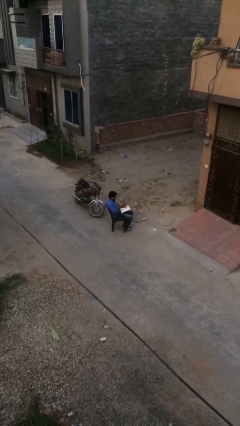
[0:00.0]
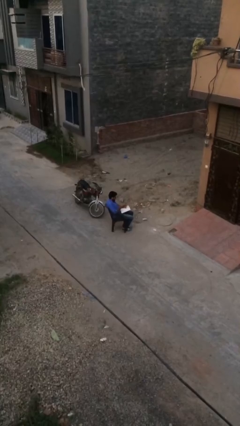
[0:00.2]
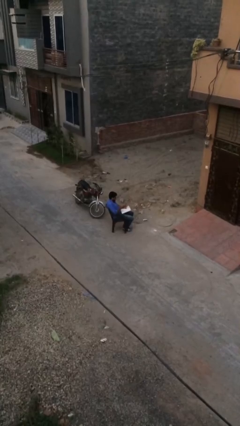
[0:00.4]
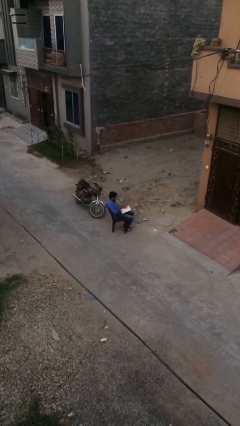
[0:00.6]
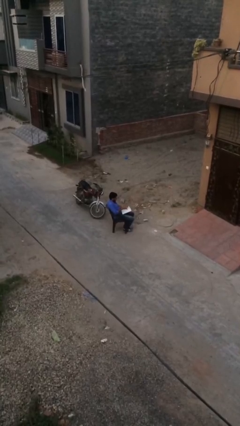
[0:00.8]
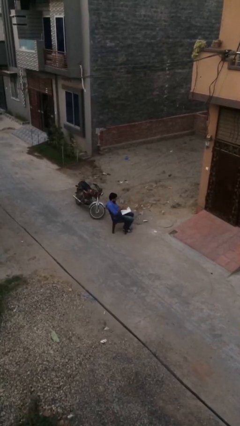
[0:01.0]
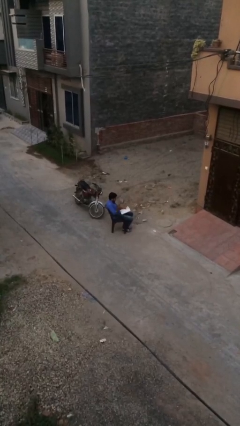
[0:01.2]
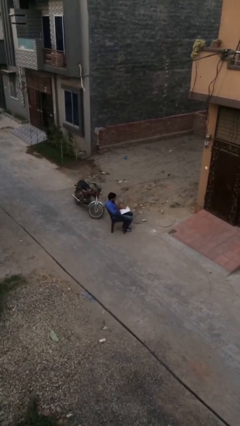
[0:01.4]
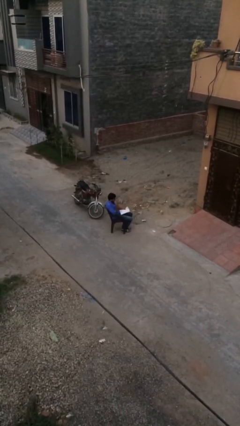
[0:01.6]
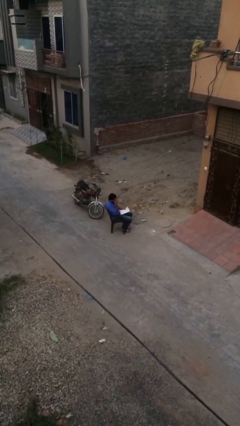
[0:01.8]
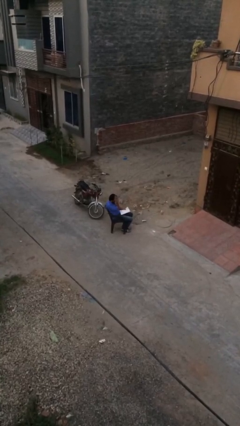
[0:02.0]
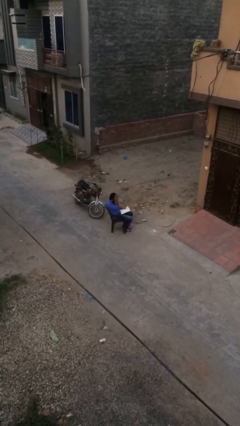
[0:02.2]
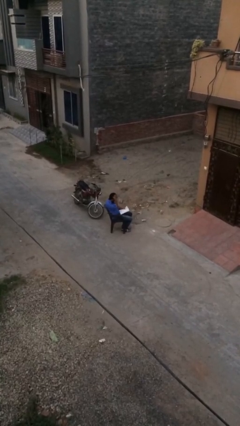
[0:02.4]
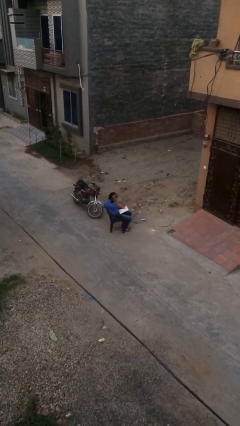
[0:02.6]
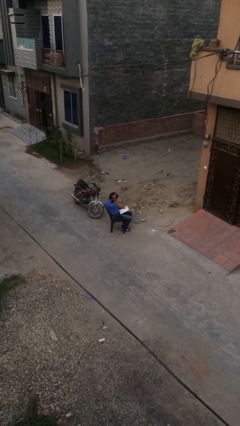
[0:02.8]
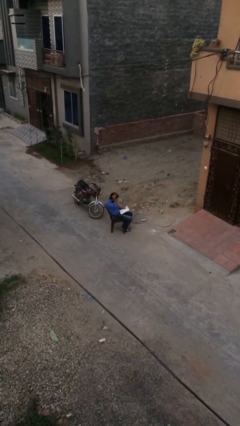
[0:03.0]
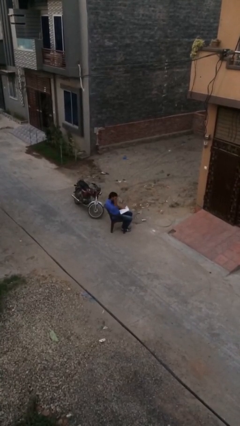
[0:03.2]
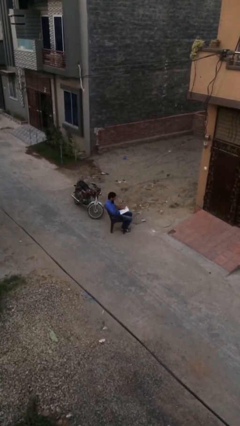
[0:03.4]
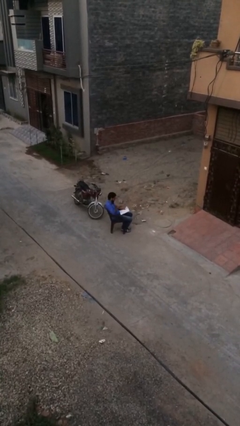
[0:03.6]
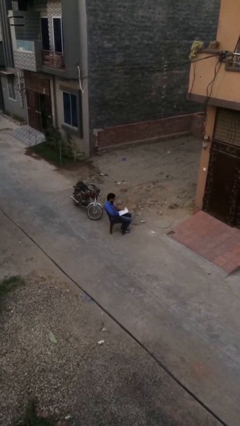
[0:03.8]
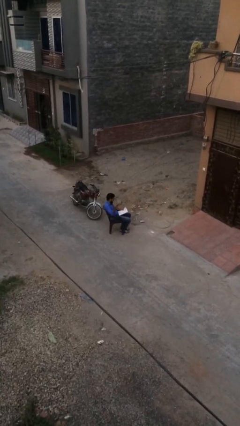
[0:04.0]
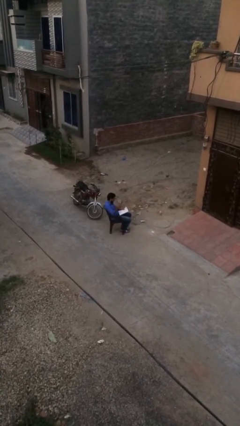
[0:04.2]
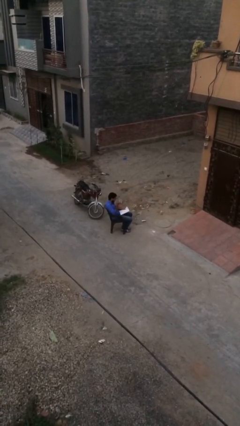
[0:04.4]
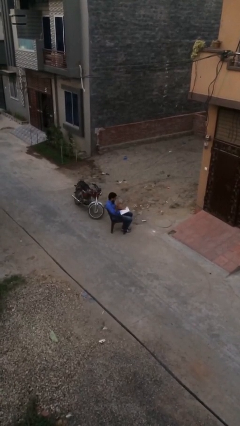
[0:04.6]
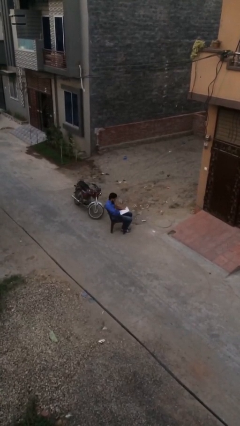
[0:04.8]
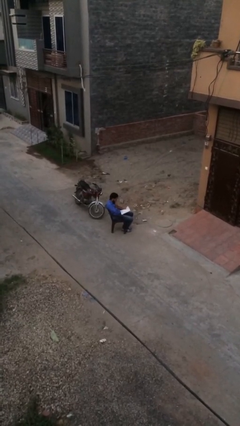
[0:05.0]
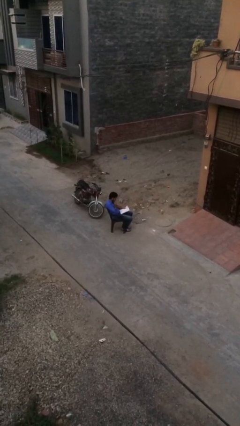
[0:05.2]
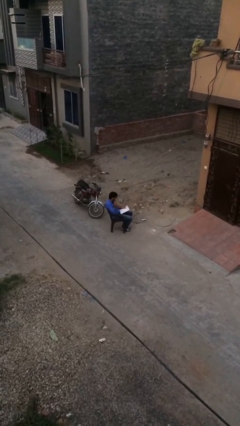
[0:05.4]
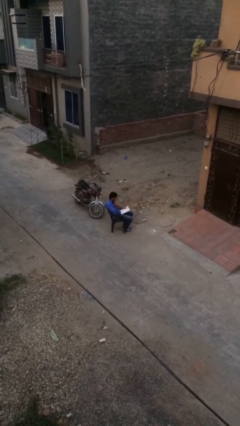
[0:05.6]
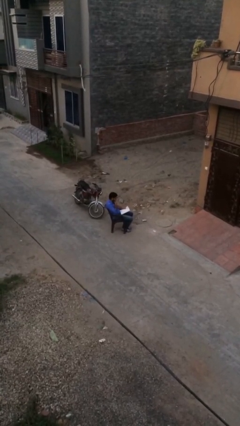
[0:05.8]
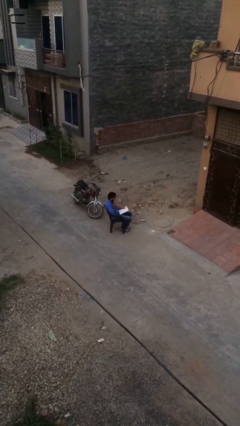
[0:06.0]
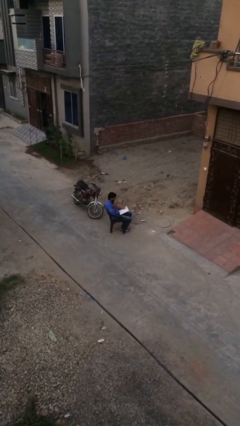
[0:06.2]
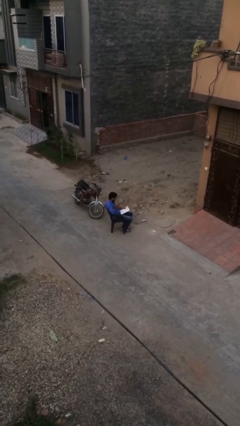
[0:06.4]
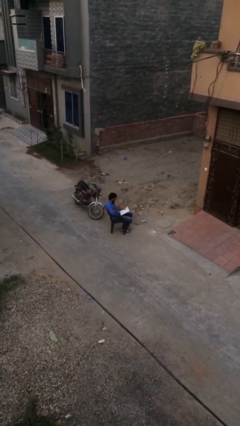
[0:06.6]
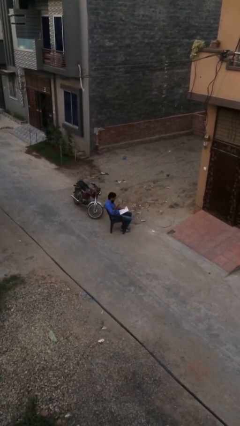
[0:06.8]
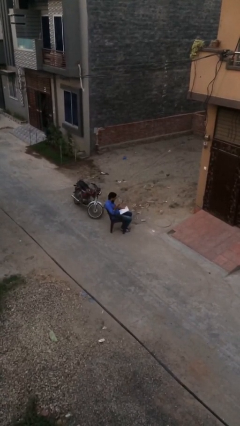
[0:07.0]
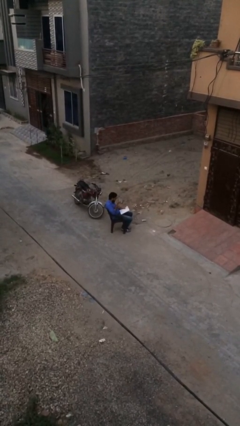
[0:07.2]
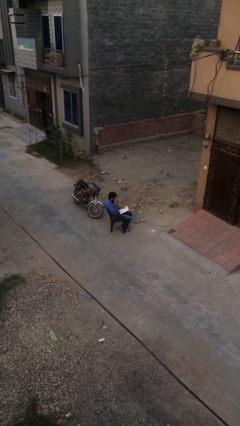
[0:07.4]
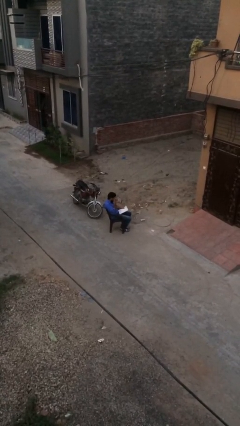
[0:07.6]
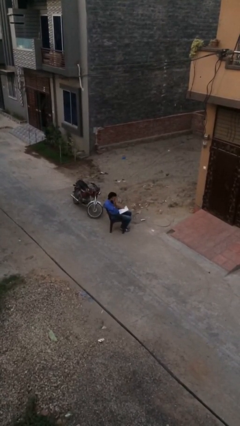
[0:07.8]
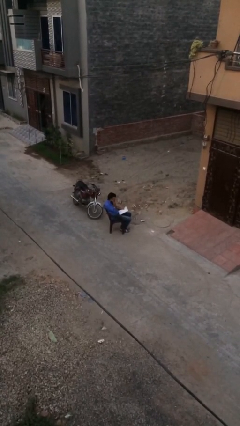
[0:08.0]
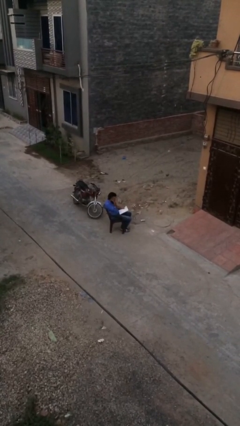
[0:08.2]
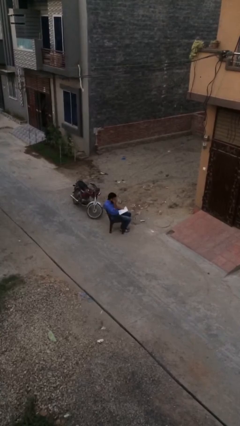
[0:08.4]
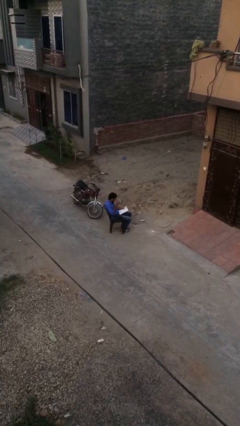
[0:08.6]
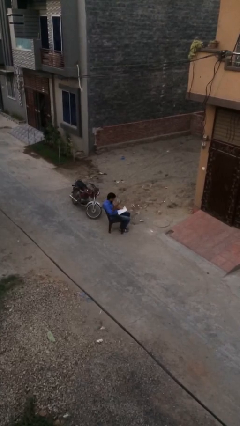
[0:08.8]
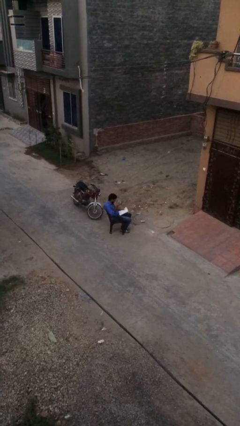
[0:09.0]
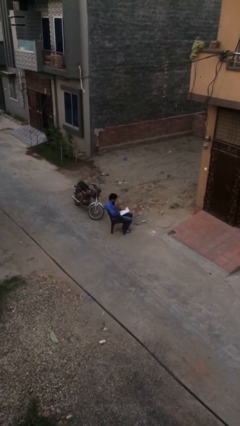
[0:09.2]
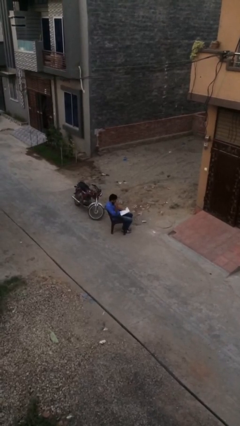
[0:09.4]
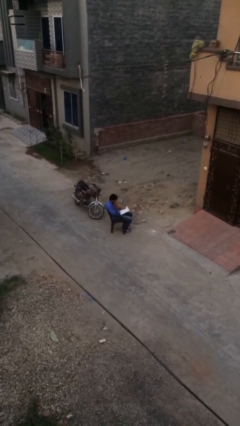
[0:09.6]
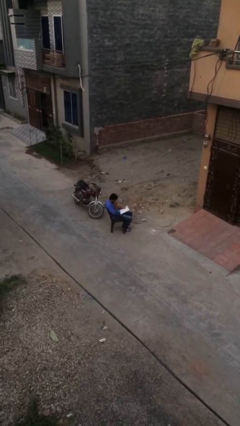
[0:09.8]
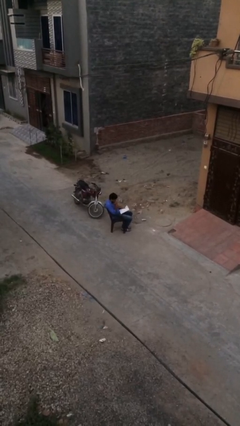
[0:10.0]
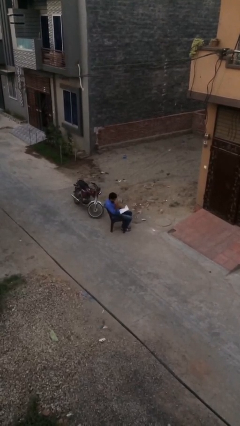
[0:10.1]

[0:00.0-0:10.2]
person reads document

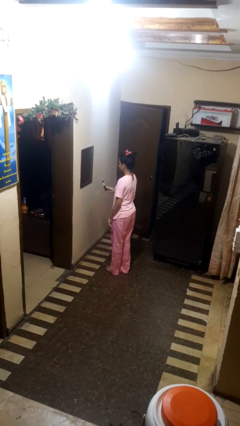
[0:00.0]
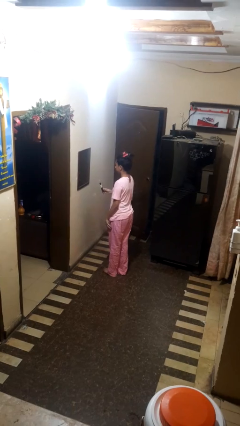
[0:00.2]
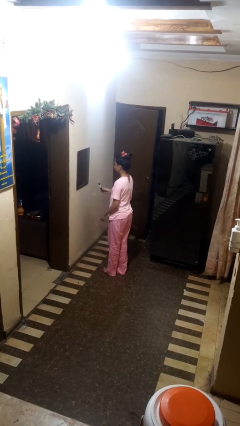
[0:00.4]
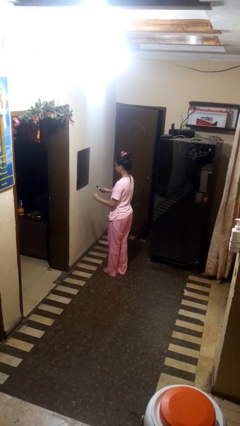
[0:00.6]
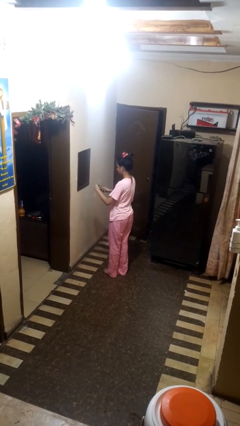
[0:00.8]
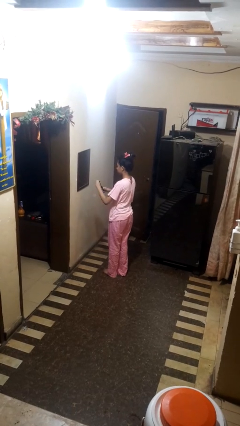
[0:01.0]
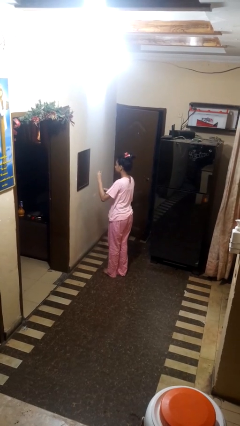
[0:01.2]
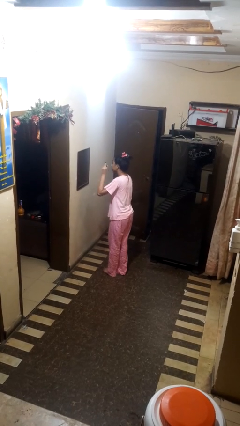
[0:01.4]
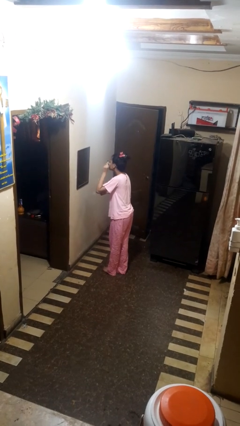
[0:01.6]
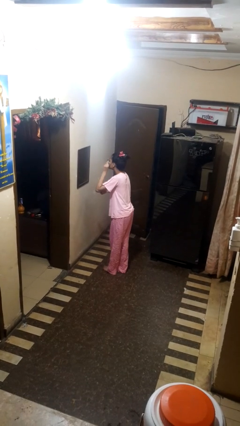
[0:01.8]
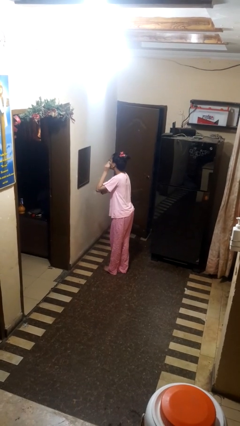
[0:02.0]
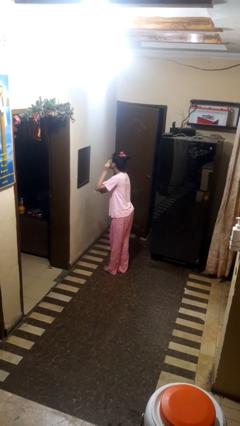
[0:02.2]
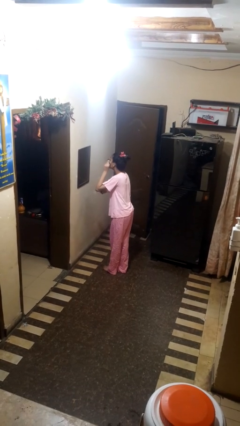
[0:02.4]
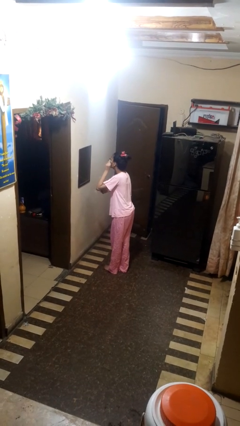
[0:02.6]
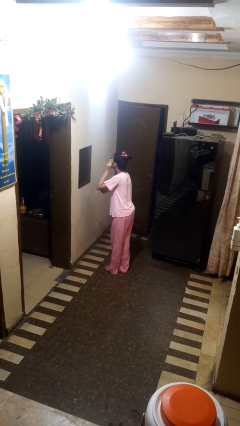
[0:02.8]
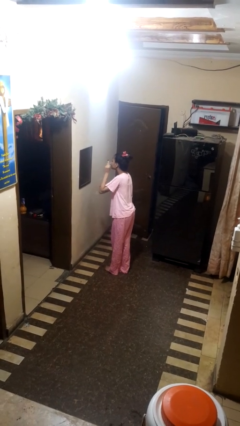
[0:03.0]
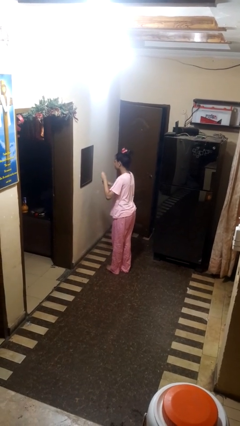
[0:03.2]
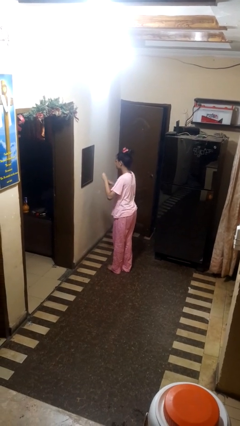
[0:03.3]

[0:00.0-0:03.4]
person applies eye makeup

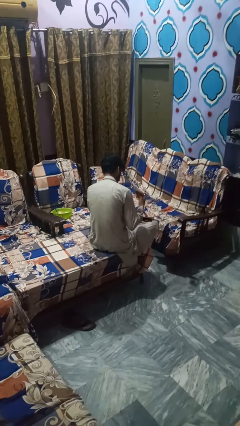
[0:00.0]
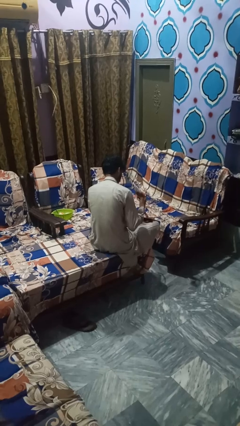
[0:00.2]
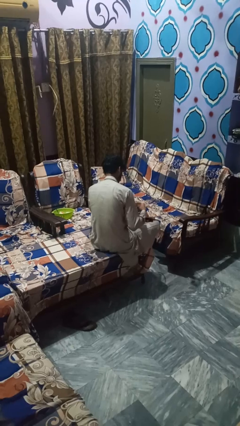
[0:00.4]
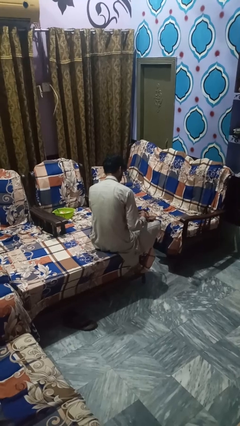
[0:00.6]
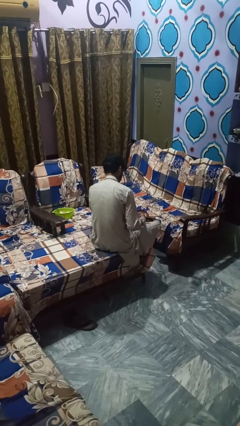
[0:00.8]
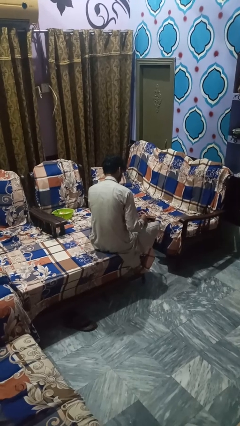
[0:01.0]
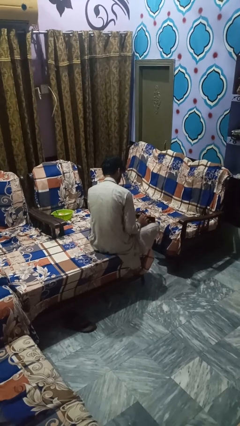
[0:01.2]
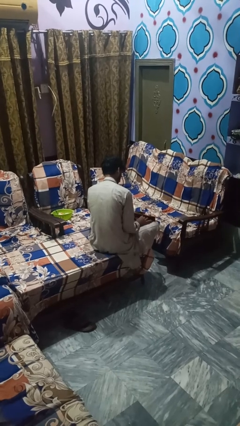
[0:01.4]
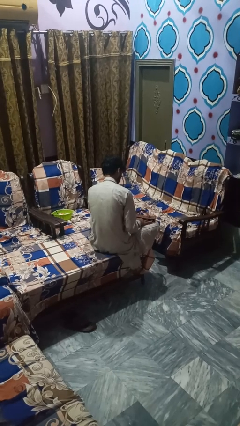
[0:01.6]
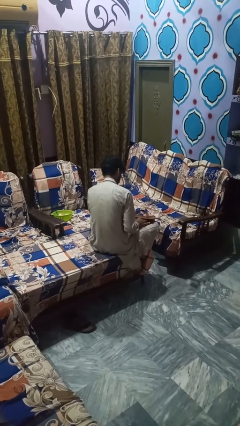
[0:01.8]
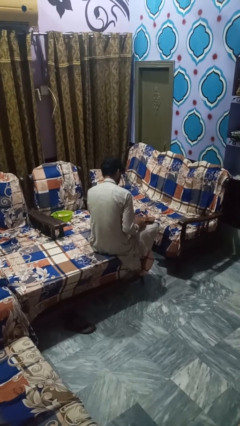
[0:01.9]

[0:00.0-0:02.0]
person puts object into bag

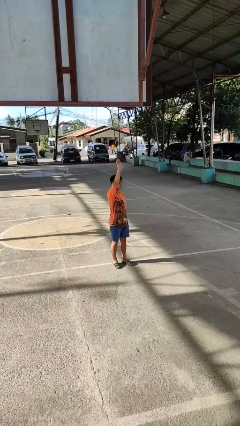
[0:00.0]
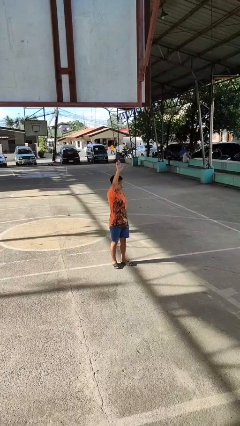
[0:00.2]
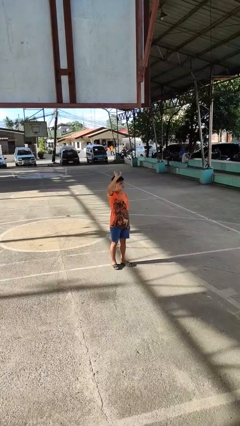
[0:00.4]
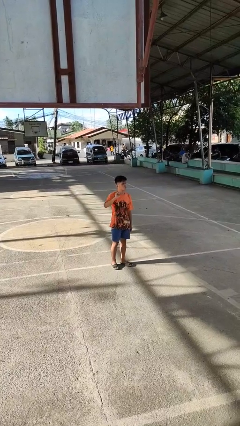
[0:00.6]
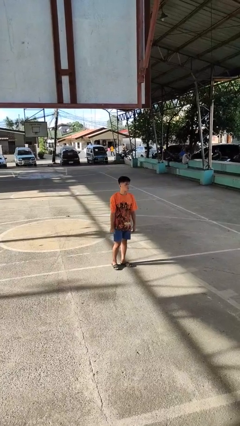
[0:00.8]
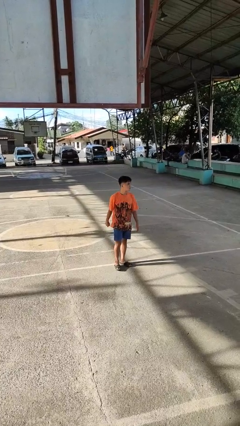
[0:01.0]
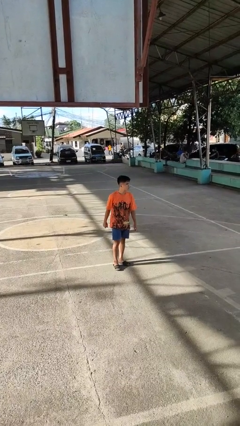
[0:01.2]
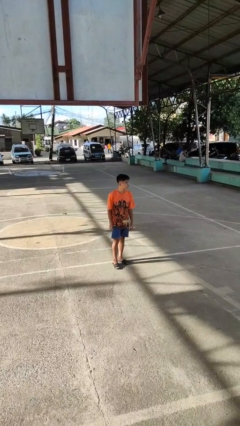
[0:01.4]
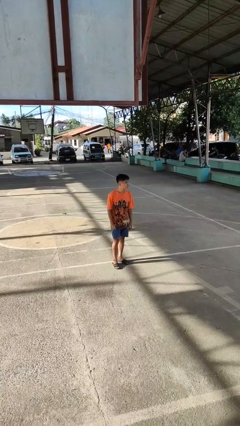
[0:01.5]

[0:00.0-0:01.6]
person gestures lower hand
